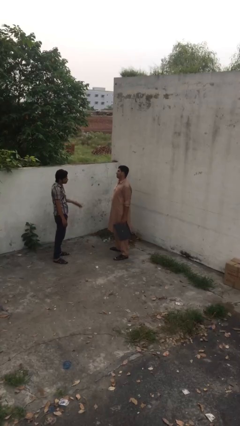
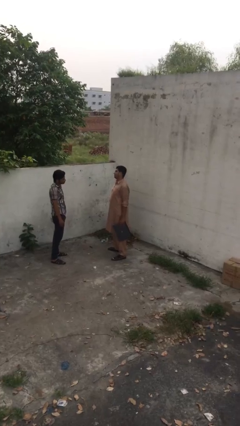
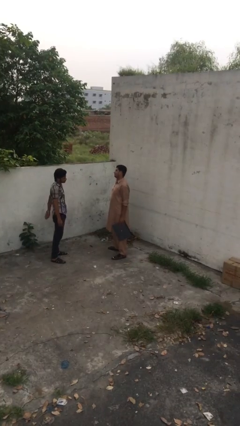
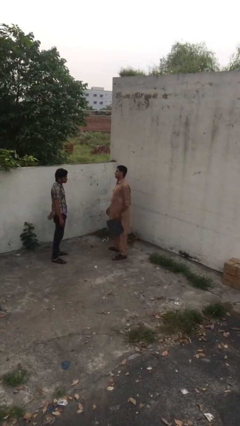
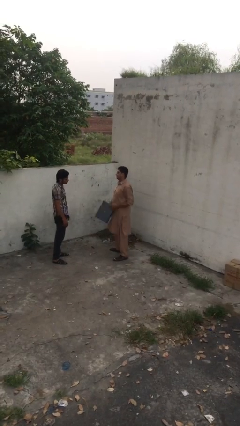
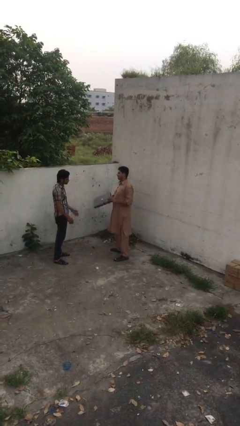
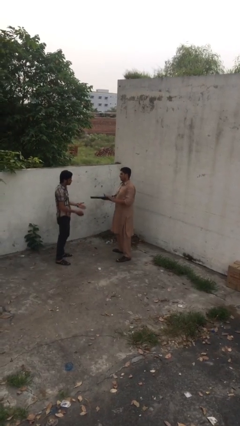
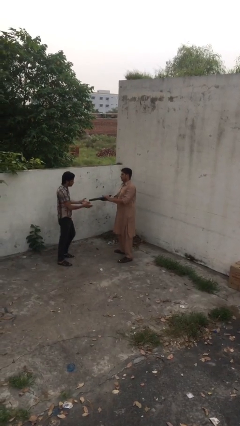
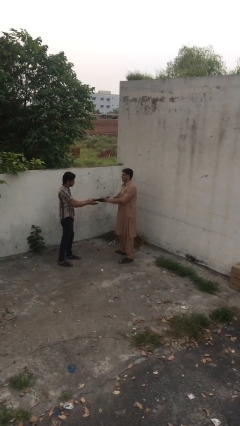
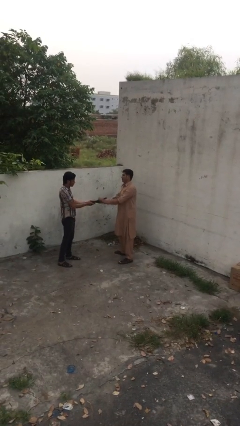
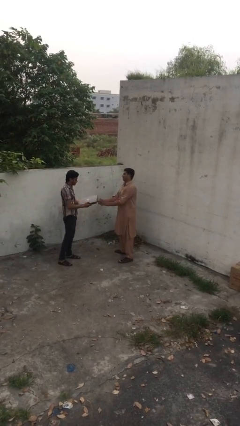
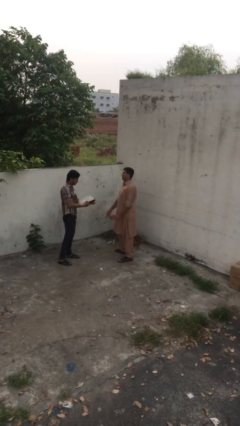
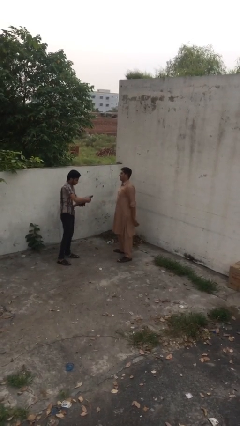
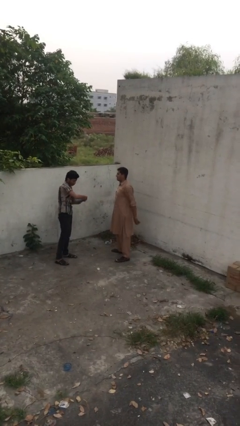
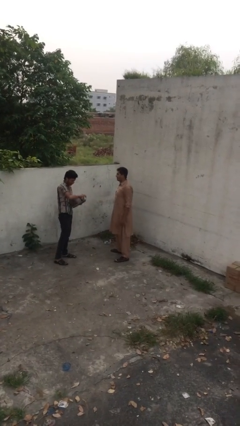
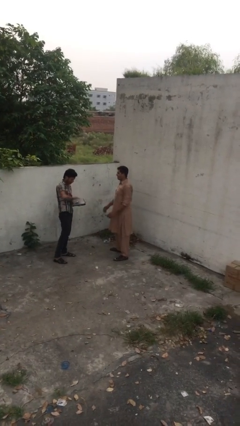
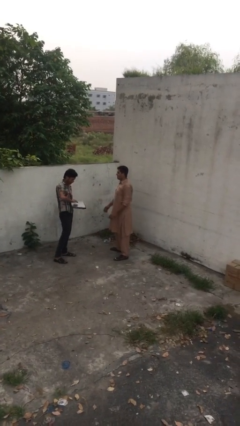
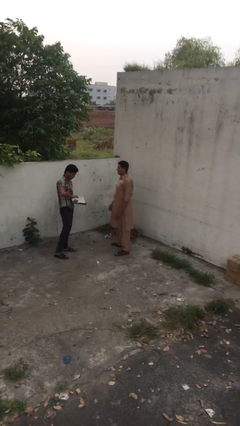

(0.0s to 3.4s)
person transfers object to person

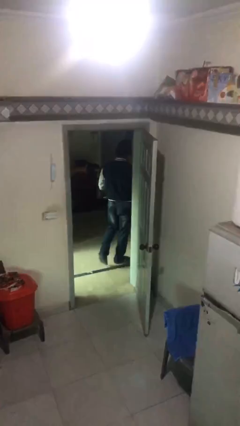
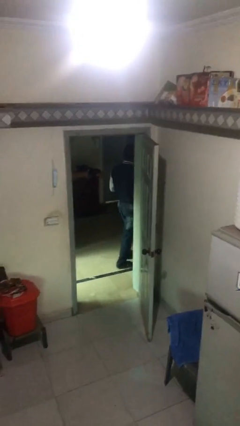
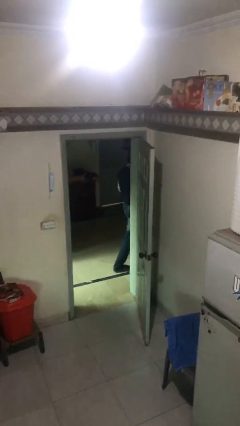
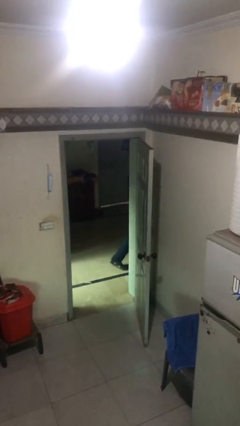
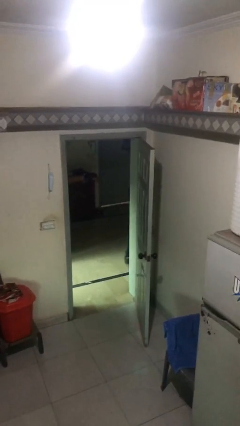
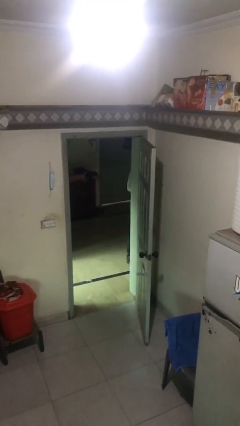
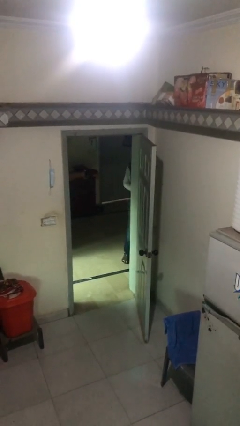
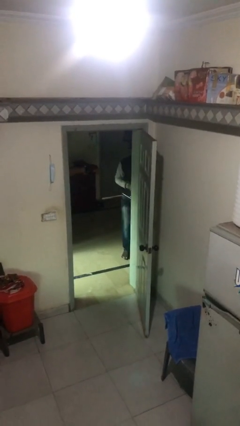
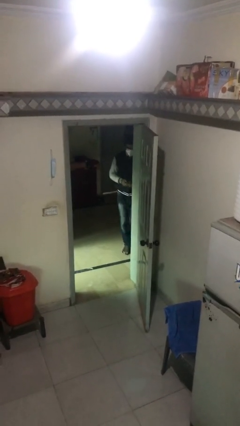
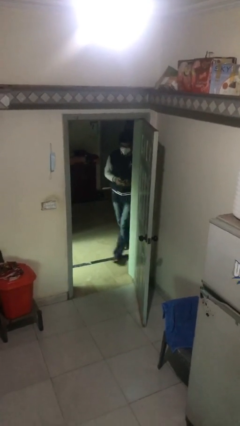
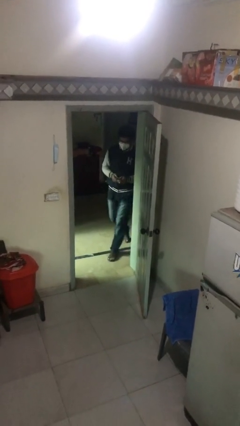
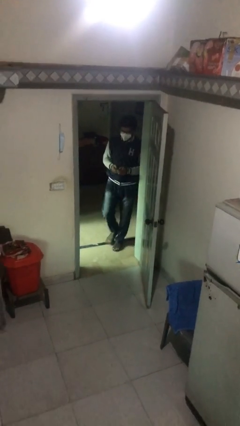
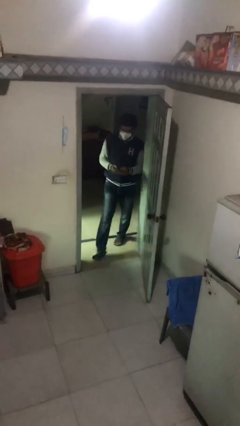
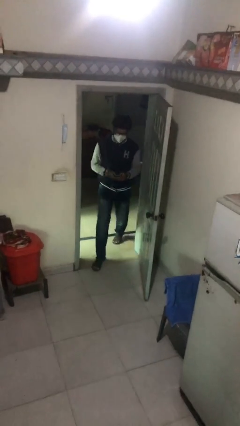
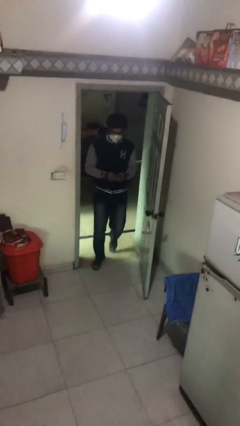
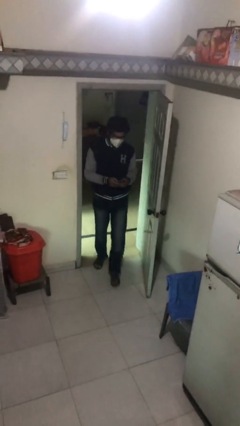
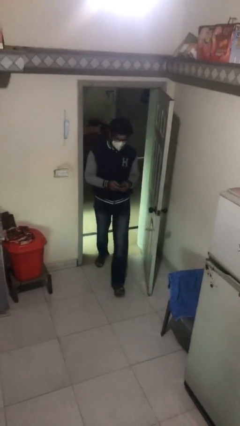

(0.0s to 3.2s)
person enters scene through structure

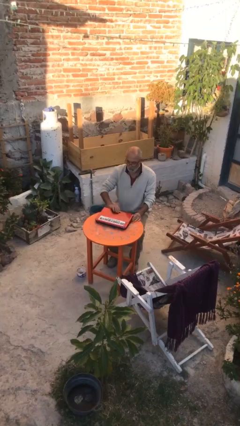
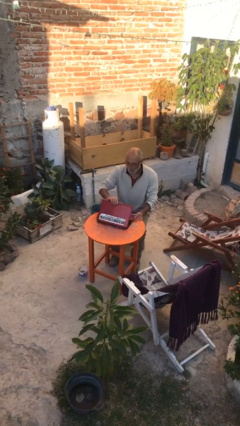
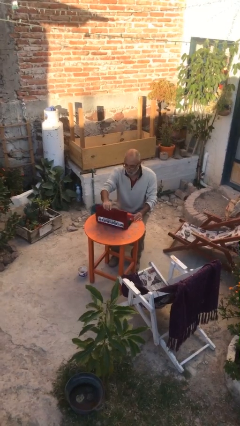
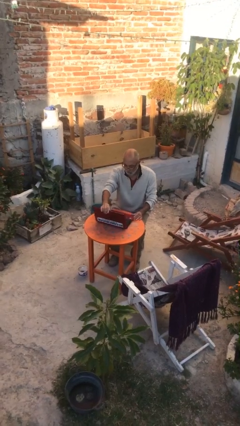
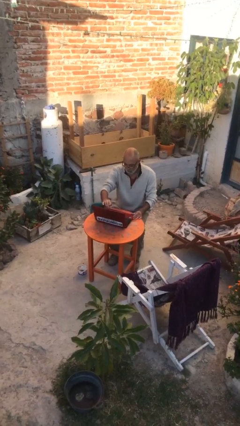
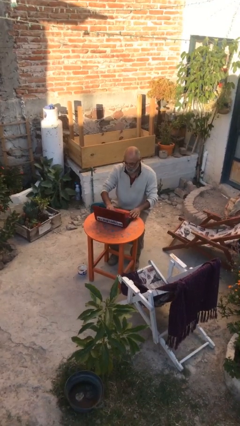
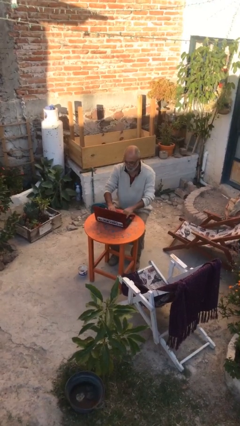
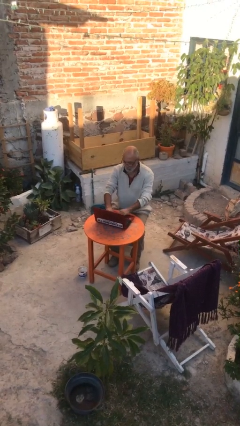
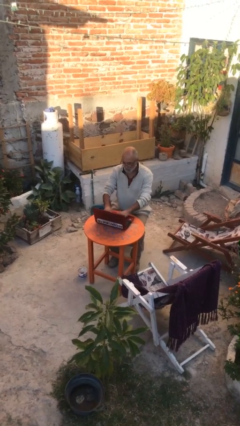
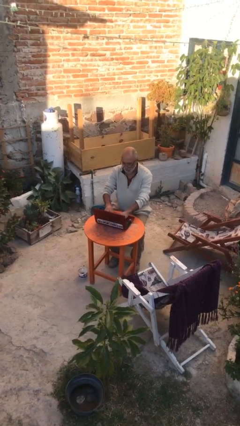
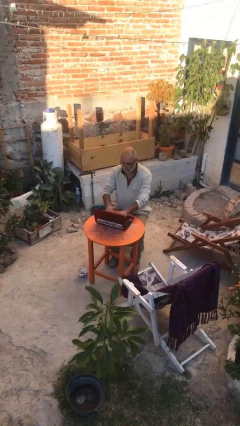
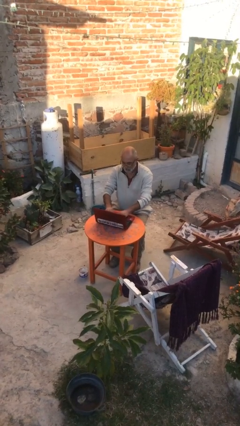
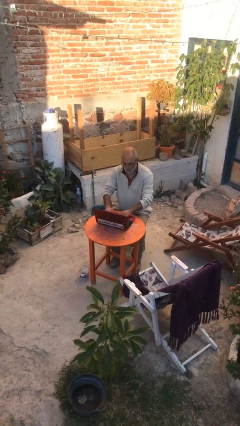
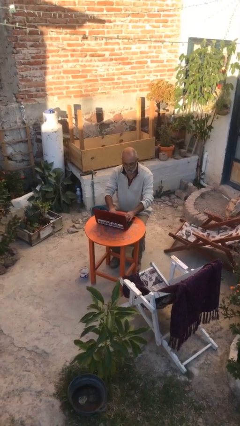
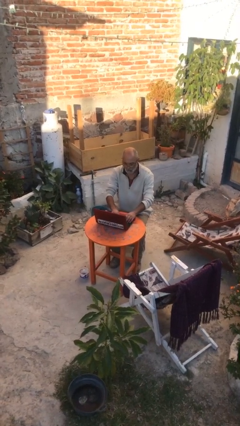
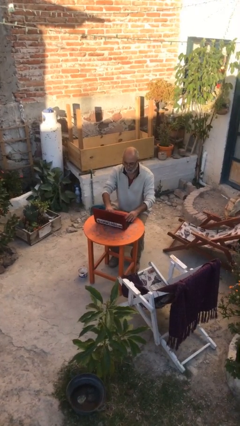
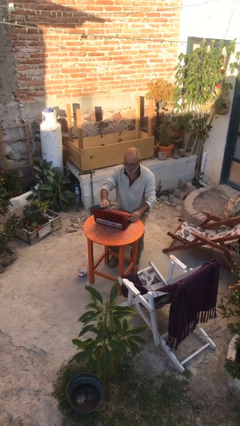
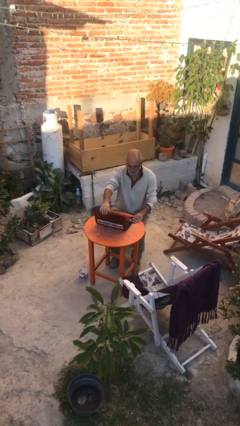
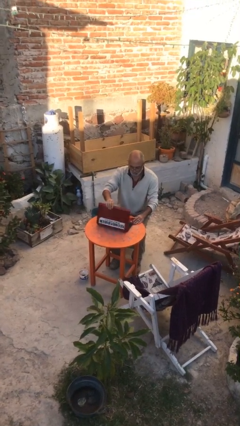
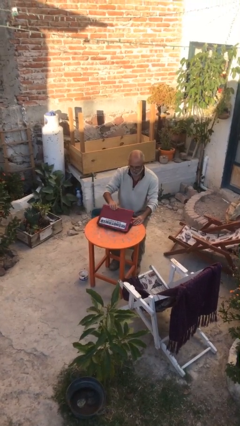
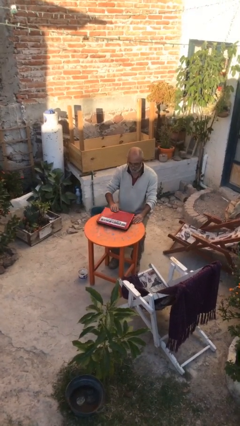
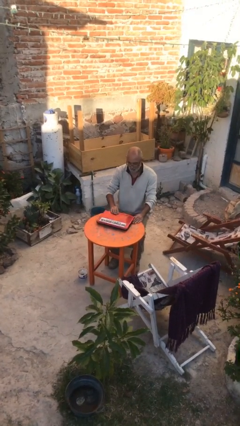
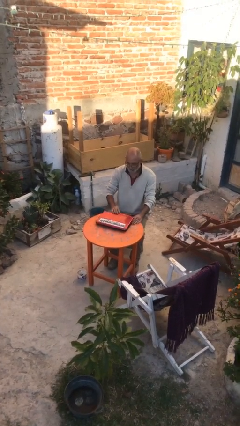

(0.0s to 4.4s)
person interacts with laptop

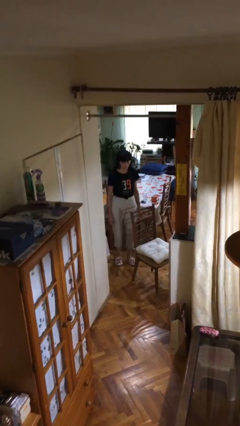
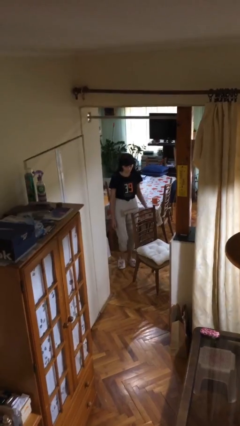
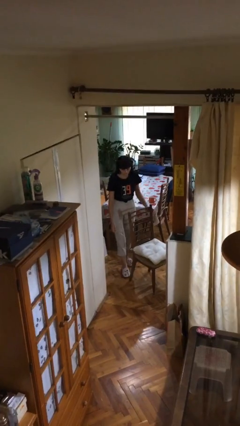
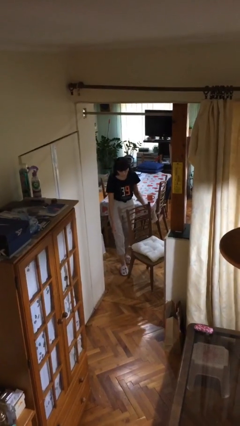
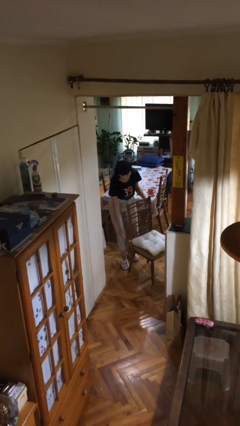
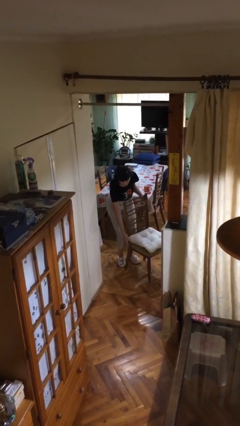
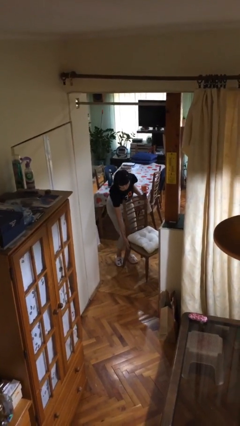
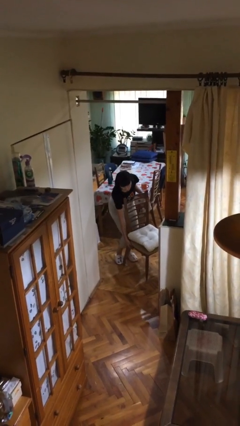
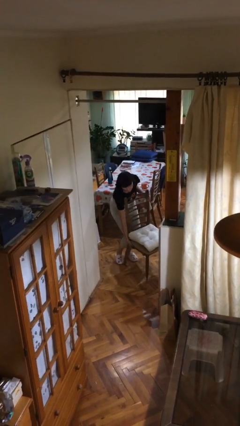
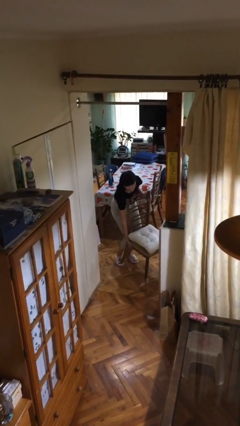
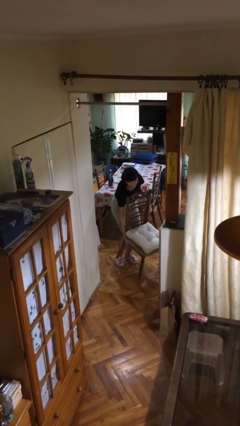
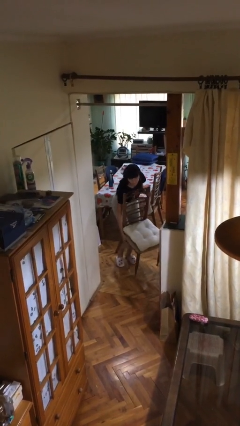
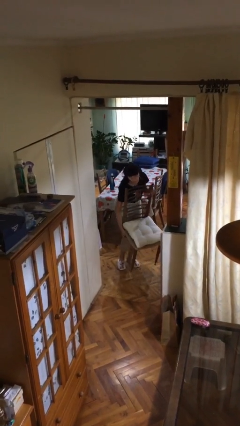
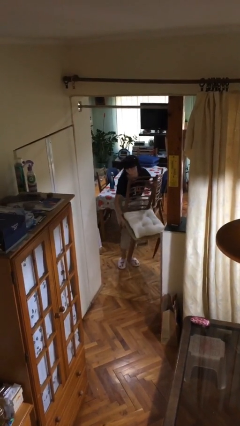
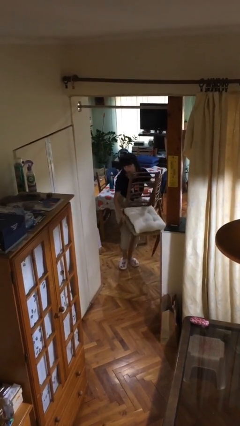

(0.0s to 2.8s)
person picks up object from floor

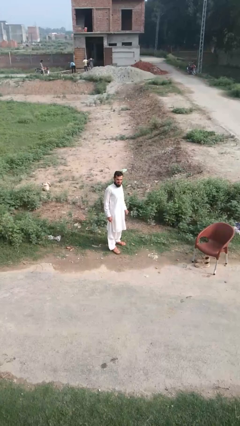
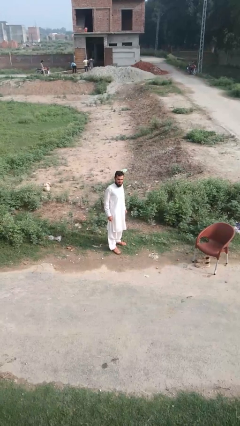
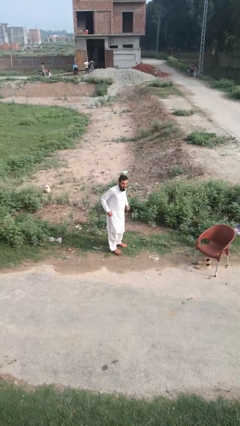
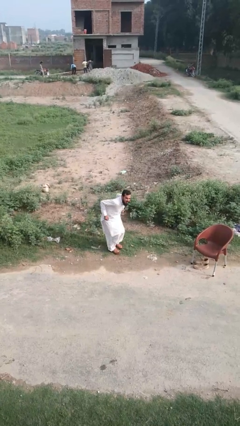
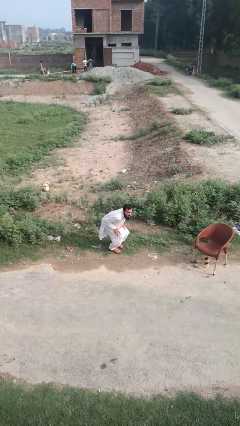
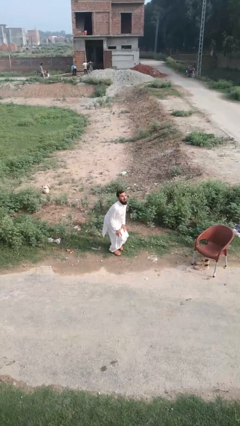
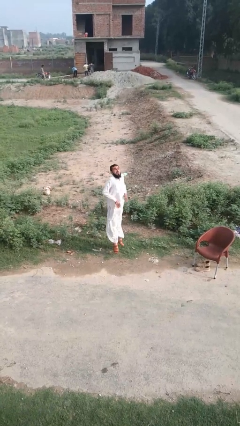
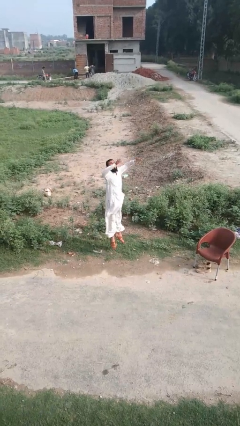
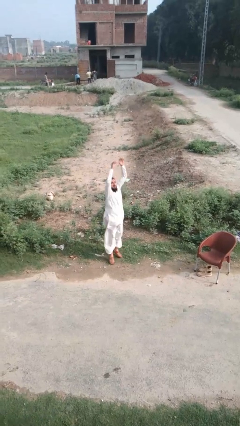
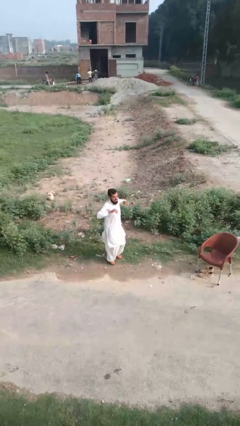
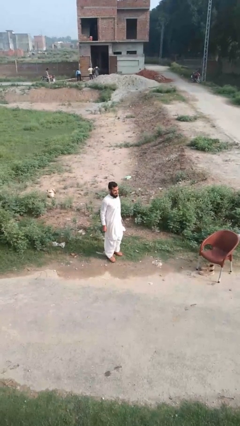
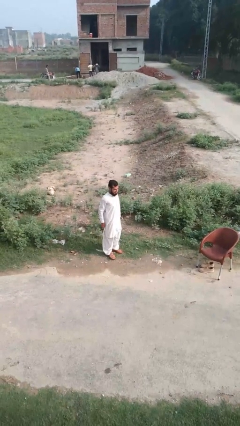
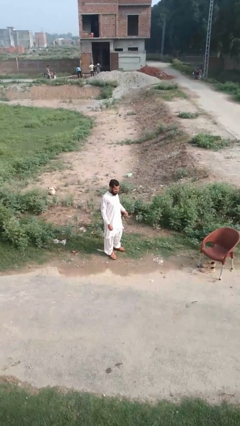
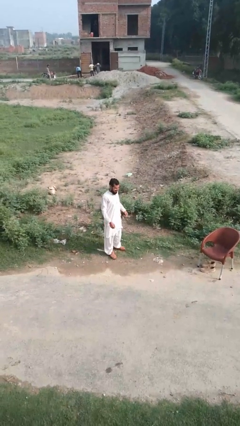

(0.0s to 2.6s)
person jumps

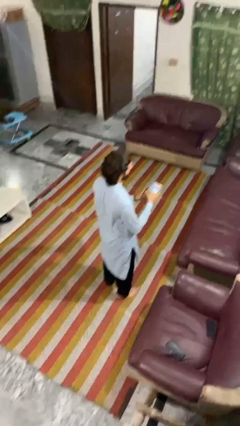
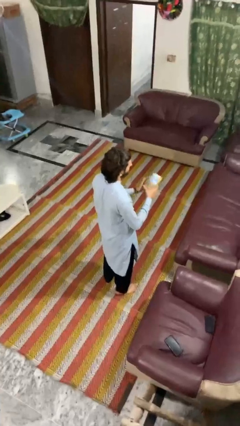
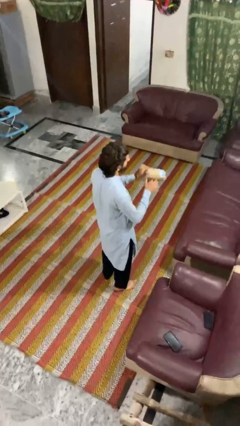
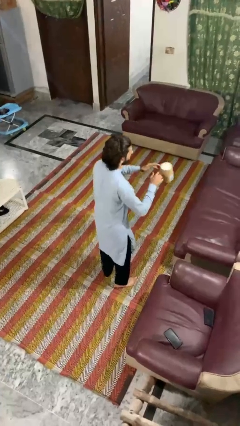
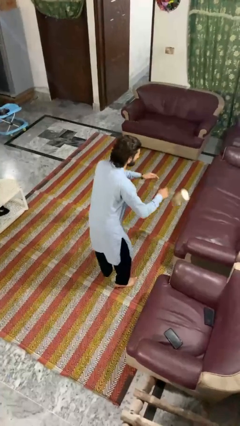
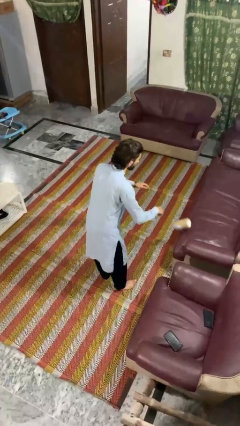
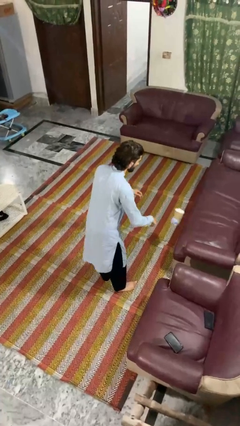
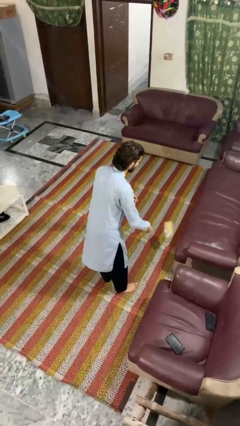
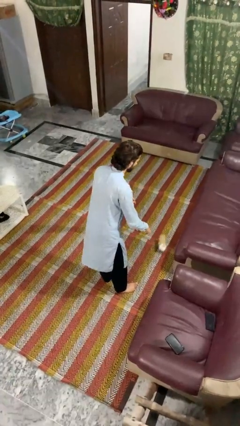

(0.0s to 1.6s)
person drops object
